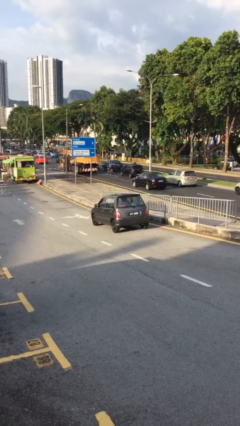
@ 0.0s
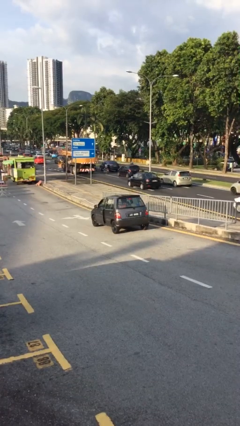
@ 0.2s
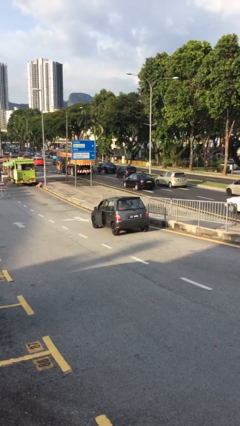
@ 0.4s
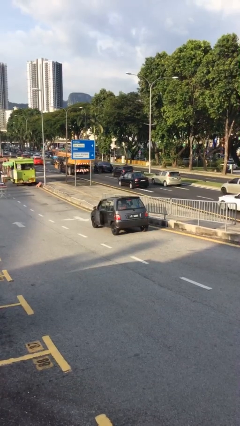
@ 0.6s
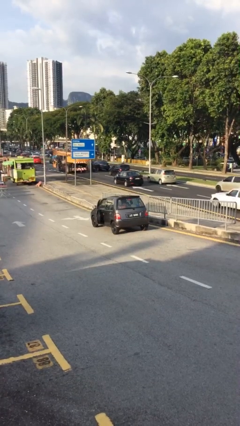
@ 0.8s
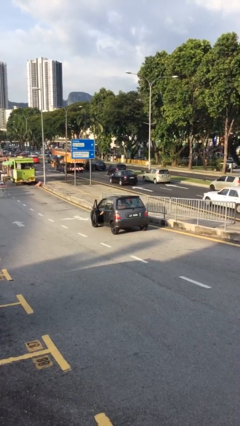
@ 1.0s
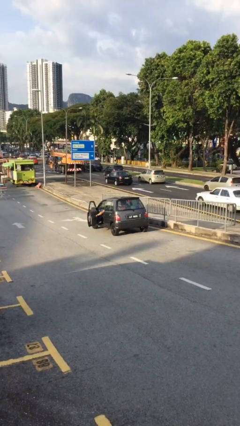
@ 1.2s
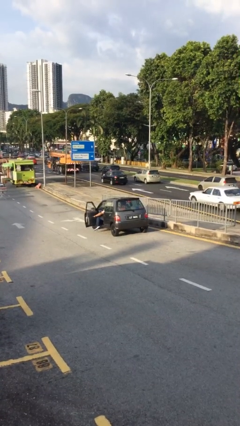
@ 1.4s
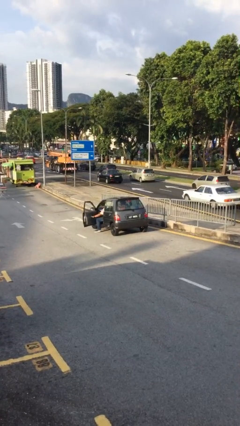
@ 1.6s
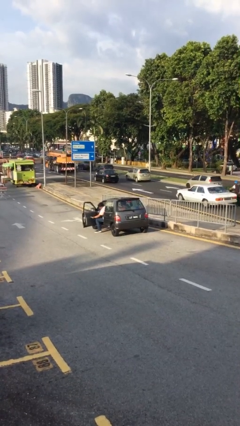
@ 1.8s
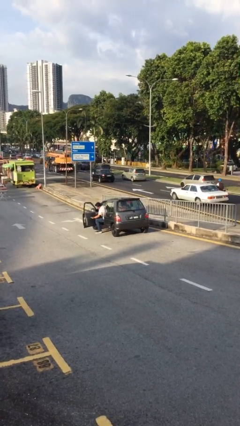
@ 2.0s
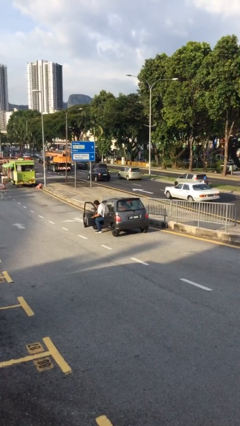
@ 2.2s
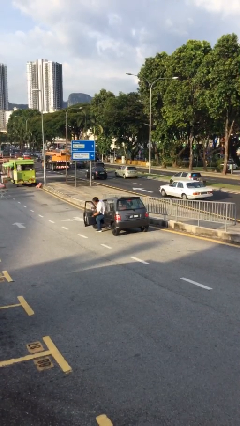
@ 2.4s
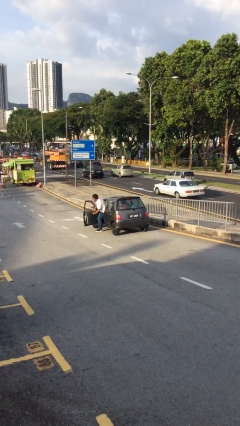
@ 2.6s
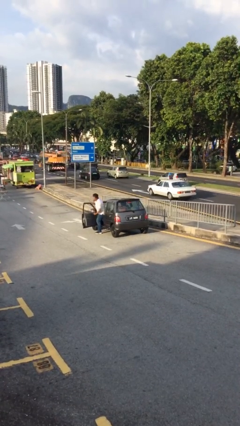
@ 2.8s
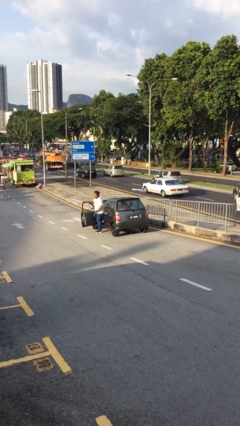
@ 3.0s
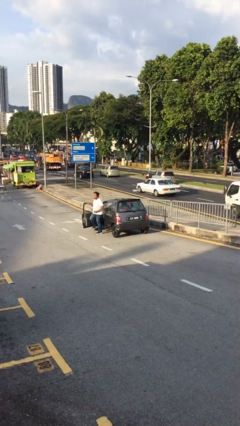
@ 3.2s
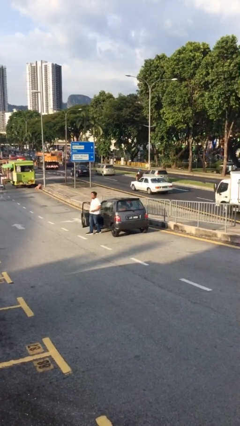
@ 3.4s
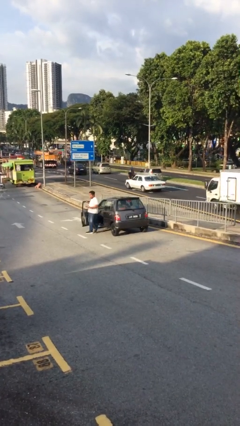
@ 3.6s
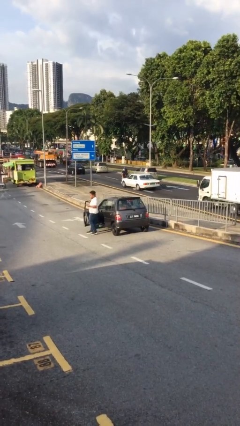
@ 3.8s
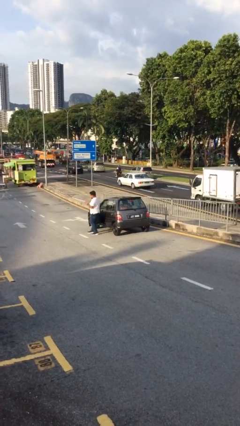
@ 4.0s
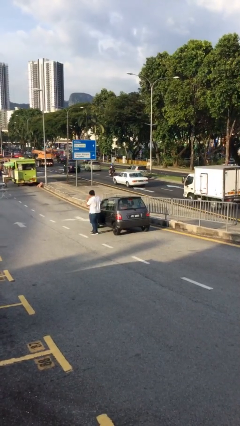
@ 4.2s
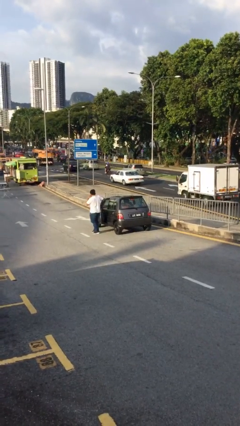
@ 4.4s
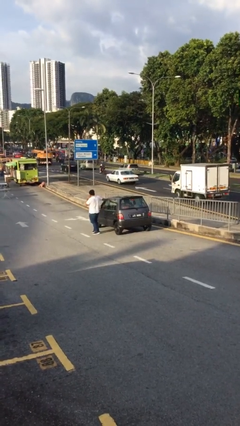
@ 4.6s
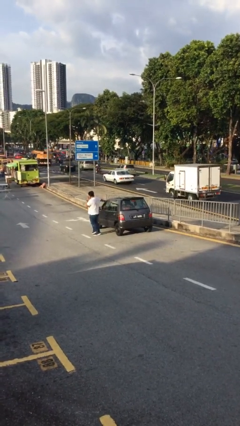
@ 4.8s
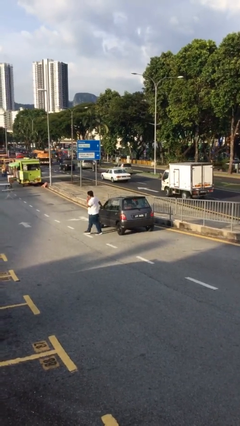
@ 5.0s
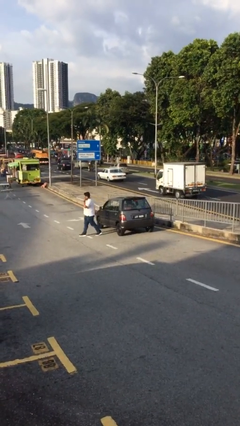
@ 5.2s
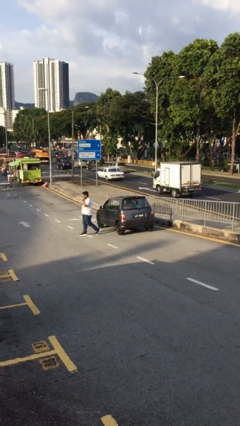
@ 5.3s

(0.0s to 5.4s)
car drops off person

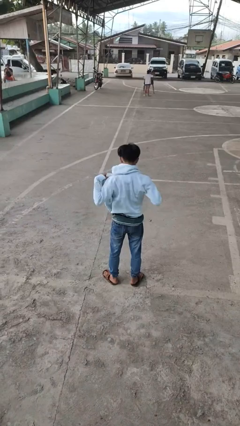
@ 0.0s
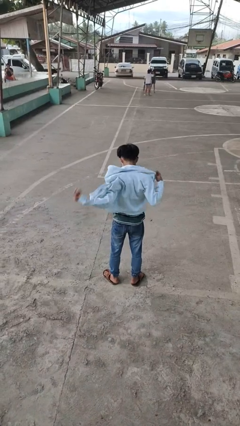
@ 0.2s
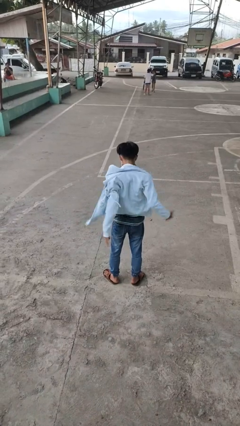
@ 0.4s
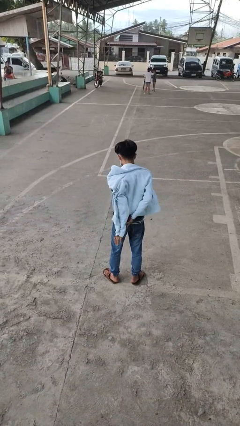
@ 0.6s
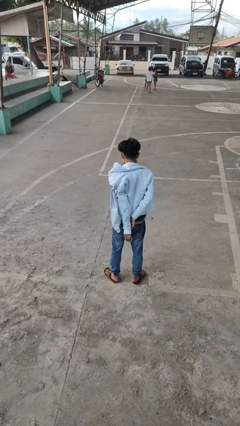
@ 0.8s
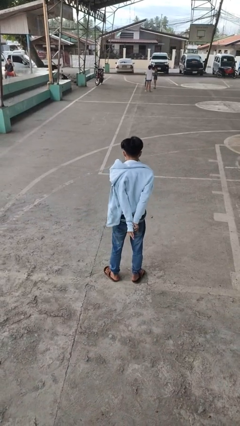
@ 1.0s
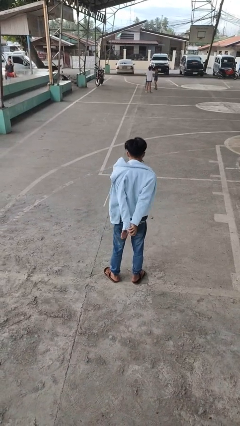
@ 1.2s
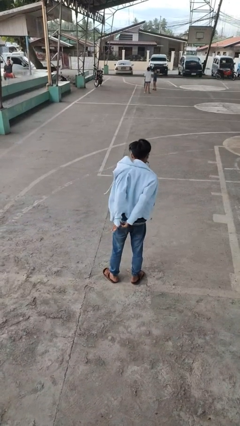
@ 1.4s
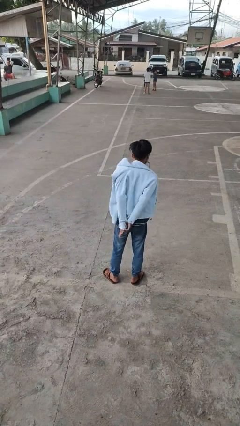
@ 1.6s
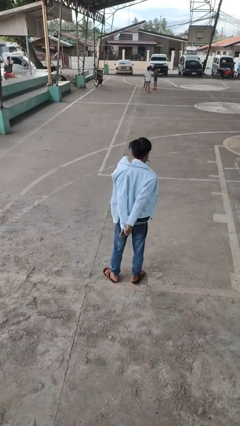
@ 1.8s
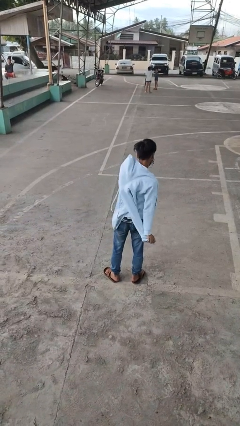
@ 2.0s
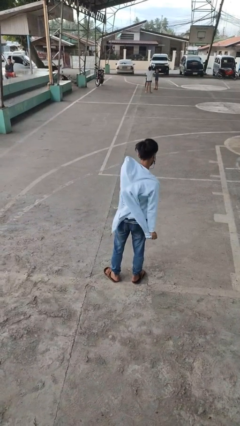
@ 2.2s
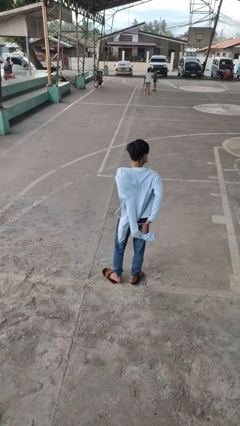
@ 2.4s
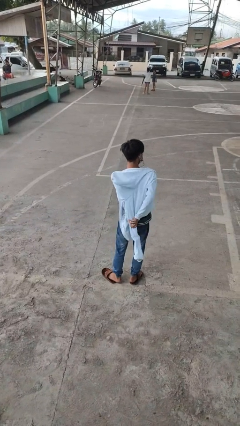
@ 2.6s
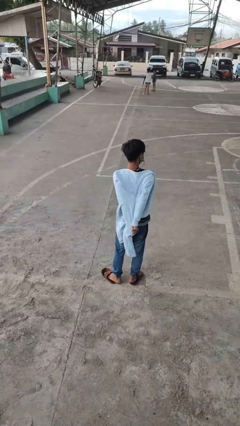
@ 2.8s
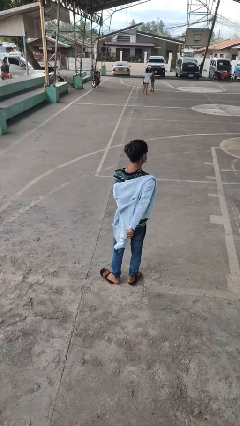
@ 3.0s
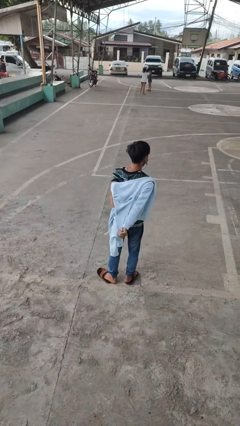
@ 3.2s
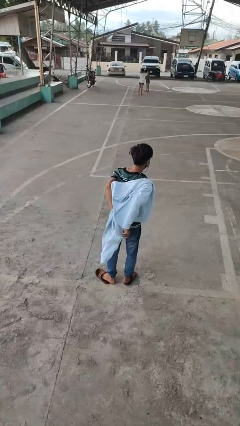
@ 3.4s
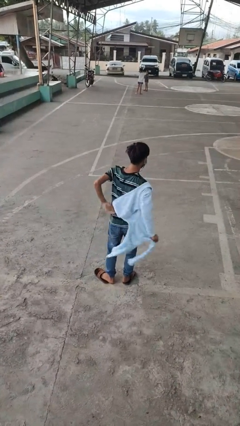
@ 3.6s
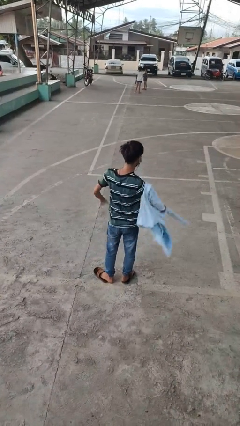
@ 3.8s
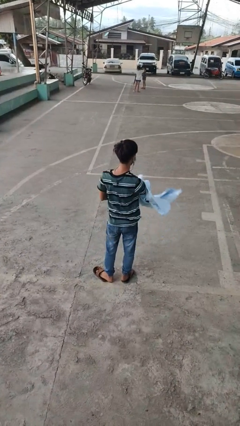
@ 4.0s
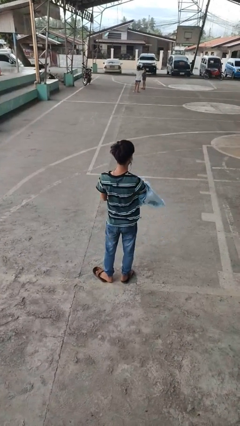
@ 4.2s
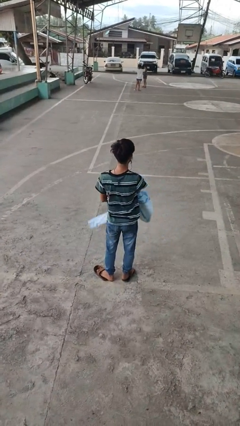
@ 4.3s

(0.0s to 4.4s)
person takes off jacket

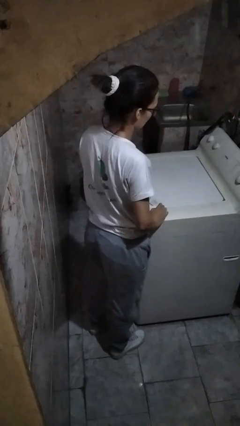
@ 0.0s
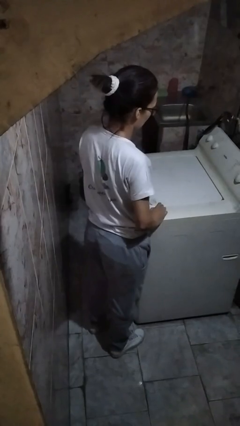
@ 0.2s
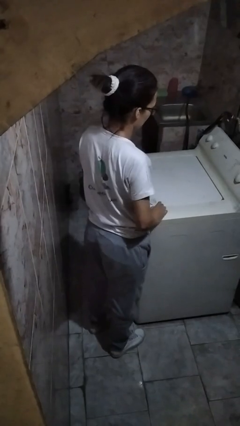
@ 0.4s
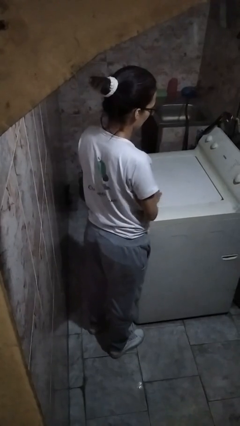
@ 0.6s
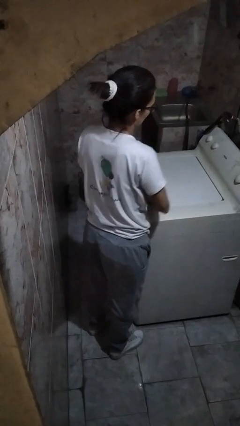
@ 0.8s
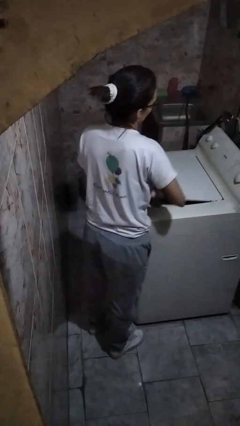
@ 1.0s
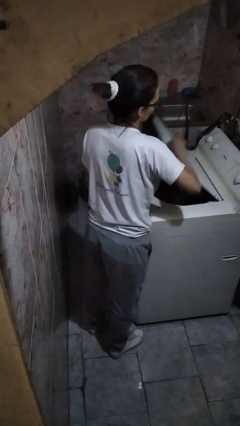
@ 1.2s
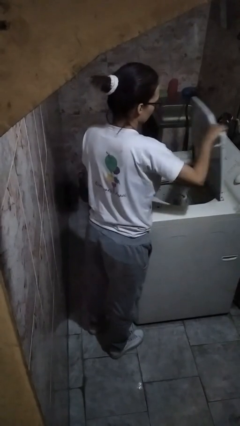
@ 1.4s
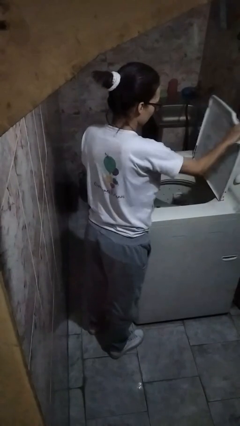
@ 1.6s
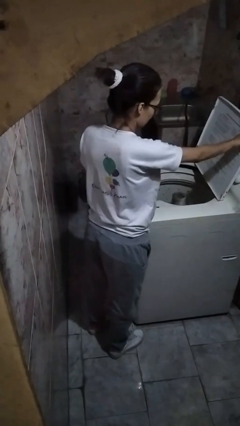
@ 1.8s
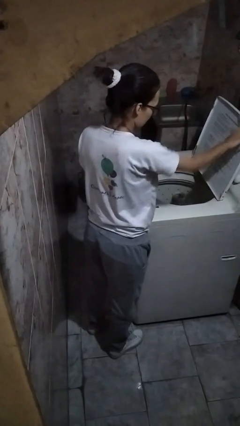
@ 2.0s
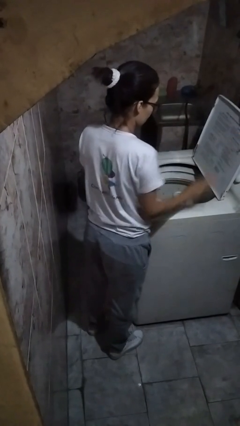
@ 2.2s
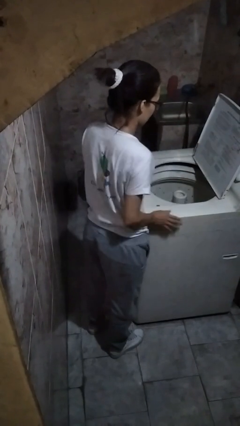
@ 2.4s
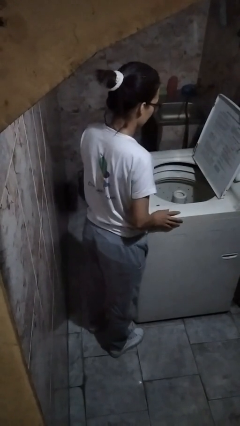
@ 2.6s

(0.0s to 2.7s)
person opens clothes washer

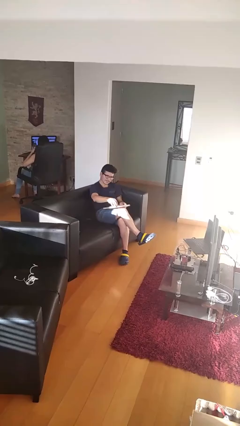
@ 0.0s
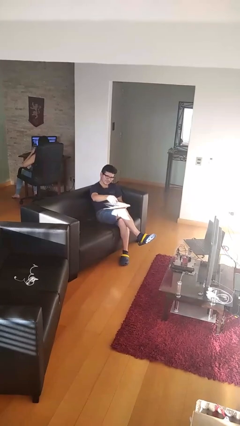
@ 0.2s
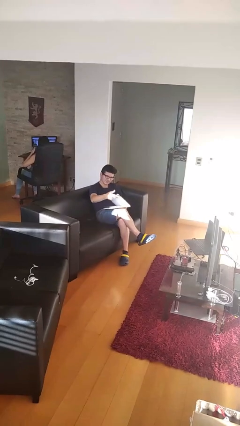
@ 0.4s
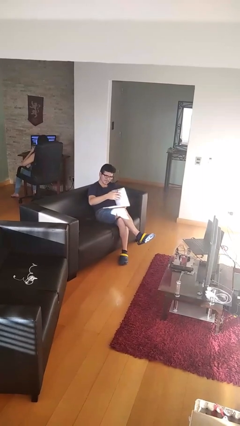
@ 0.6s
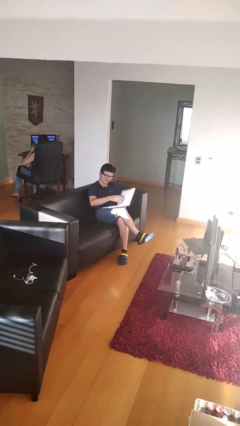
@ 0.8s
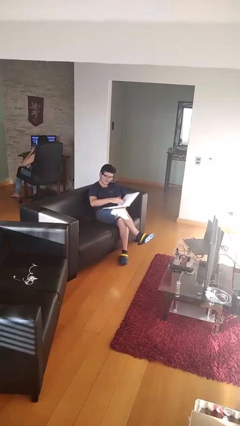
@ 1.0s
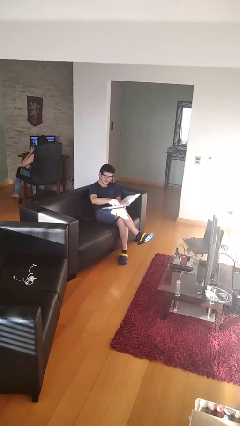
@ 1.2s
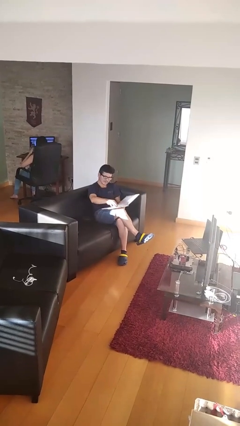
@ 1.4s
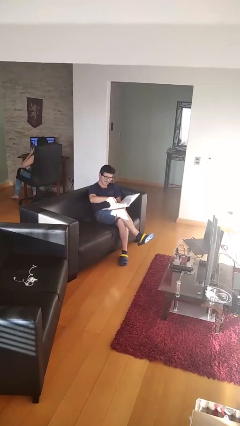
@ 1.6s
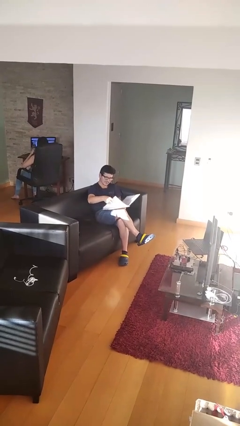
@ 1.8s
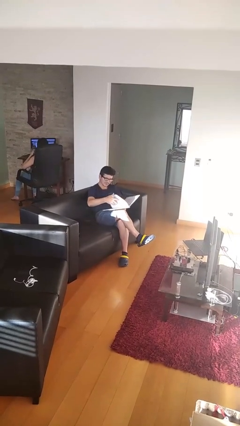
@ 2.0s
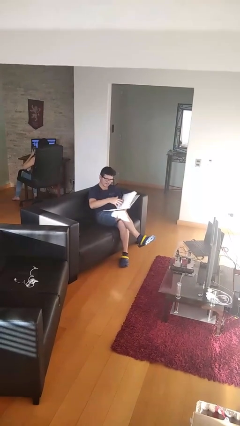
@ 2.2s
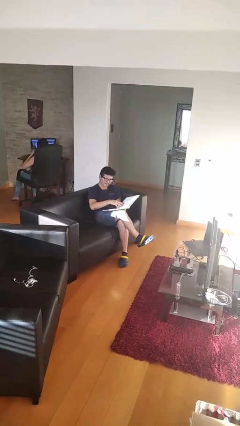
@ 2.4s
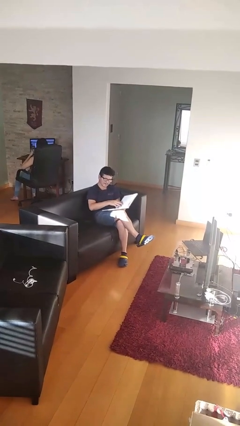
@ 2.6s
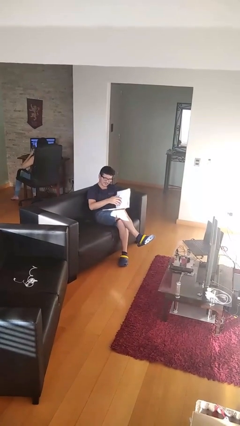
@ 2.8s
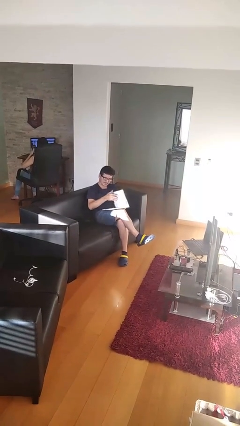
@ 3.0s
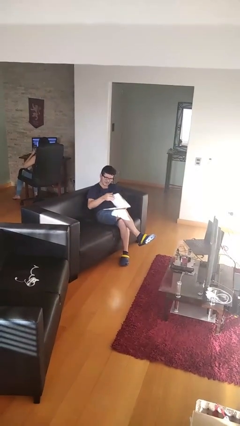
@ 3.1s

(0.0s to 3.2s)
person reads document

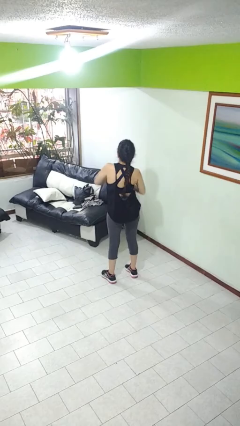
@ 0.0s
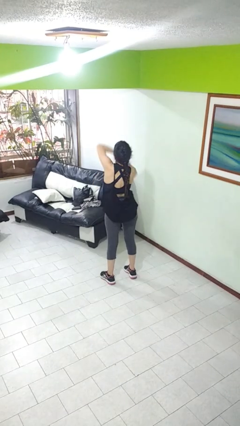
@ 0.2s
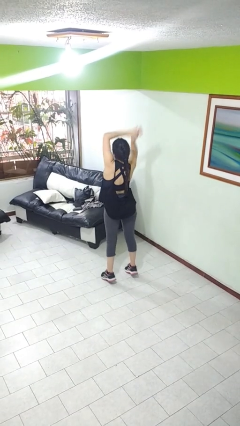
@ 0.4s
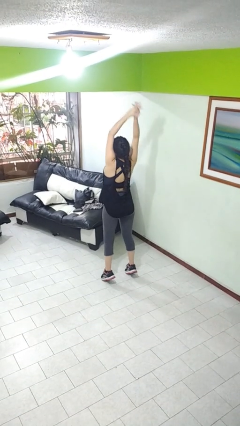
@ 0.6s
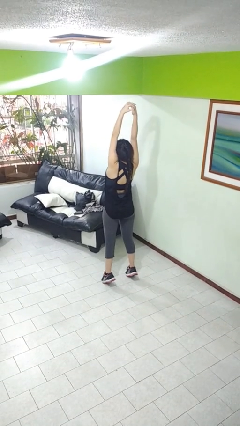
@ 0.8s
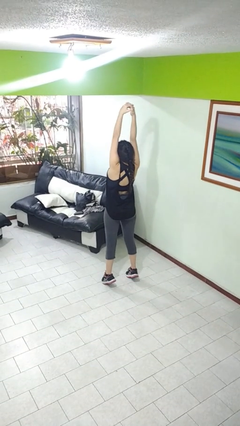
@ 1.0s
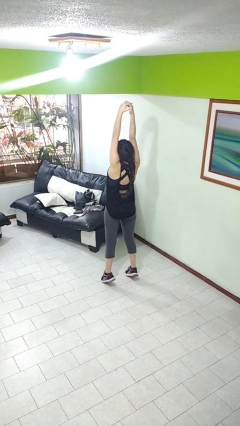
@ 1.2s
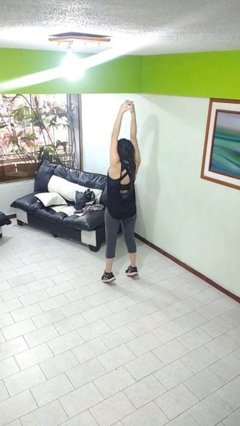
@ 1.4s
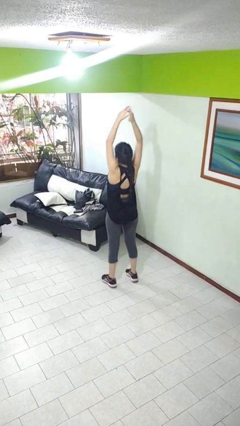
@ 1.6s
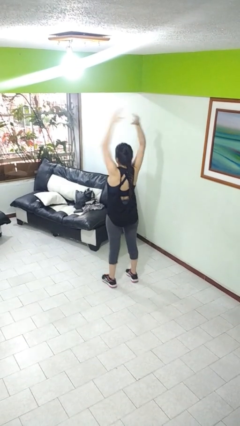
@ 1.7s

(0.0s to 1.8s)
person stretches arms over head

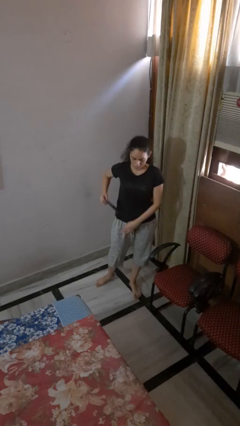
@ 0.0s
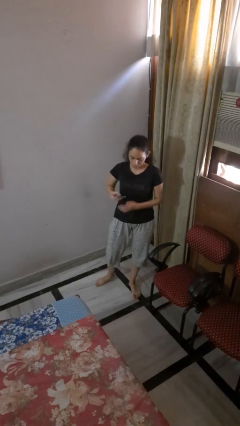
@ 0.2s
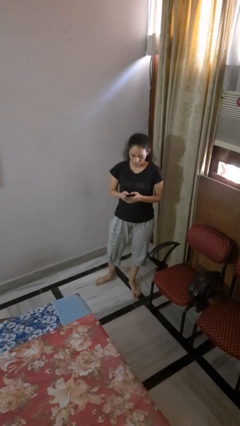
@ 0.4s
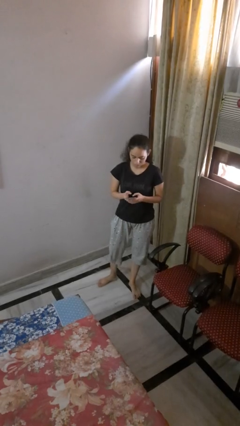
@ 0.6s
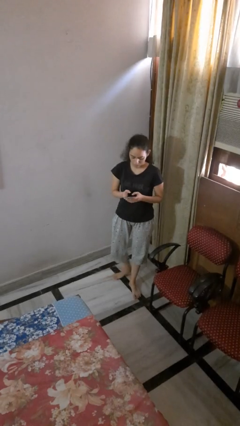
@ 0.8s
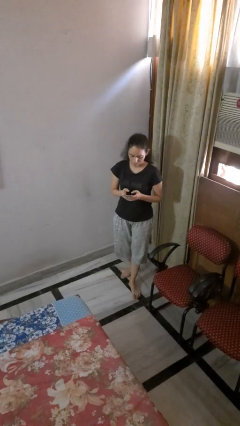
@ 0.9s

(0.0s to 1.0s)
person takes phone from pocket
